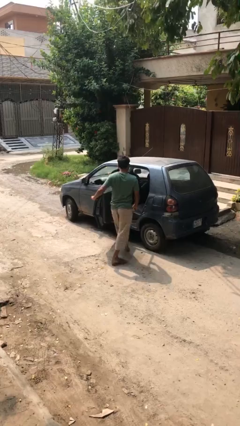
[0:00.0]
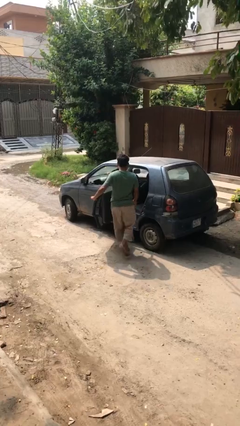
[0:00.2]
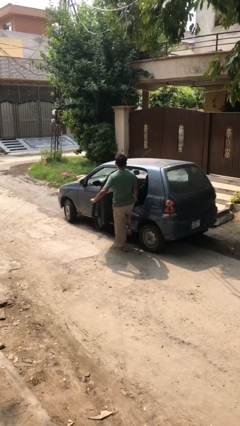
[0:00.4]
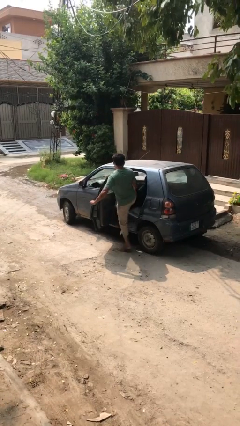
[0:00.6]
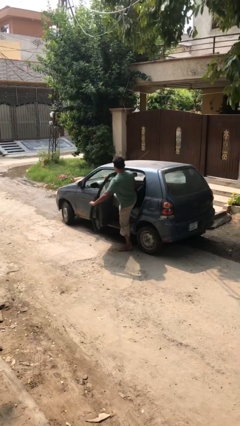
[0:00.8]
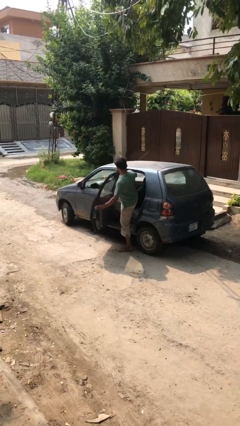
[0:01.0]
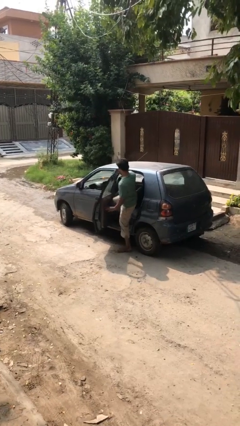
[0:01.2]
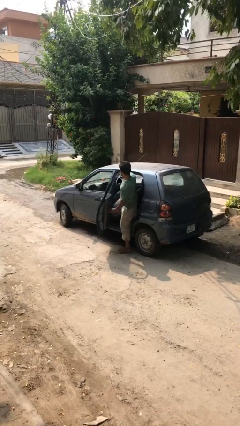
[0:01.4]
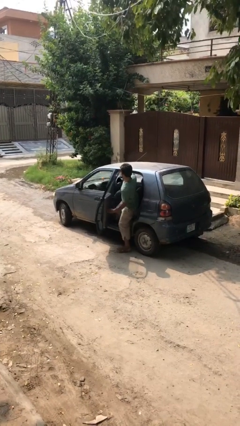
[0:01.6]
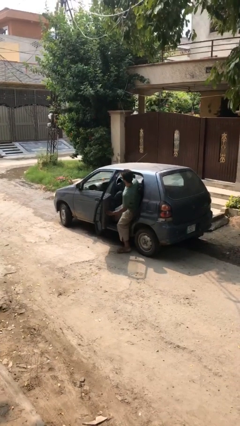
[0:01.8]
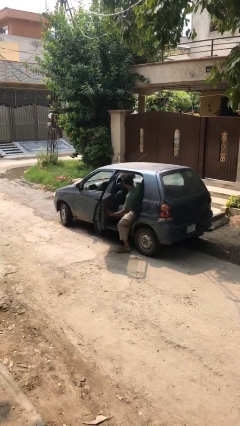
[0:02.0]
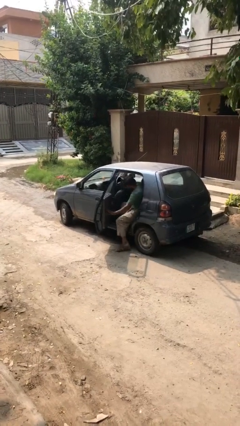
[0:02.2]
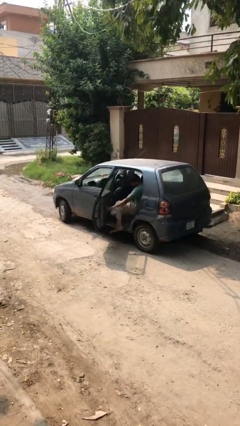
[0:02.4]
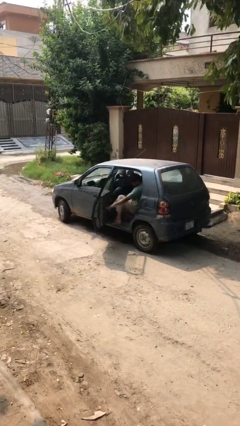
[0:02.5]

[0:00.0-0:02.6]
person enters car

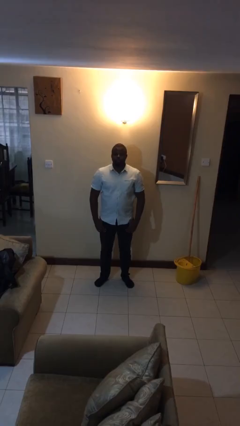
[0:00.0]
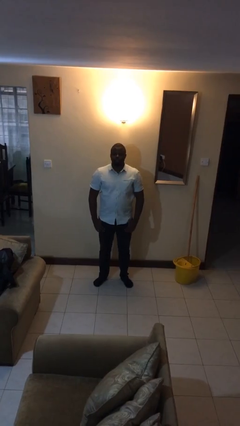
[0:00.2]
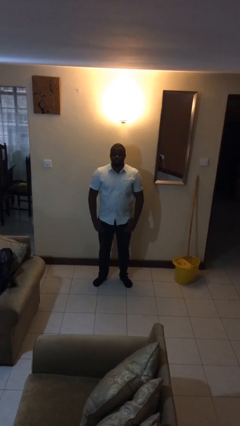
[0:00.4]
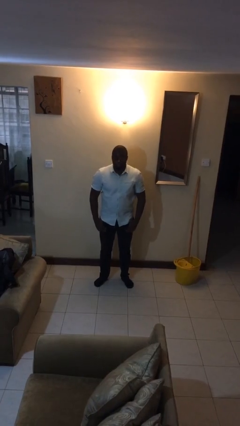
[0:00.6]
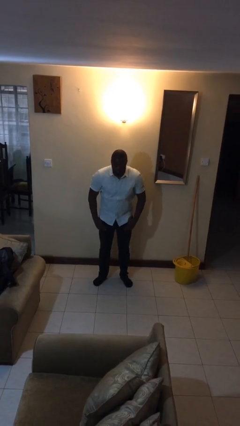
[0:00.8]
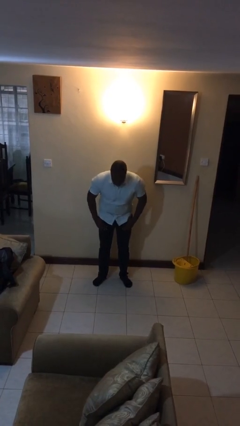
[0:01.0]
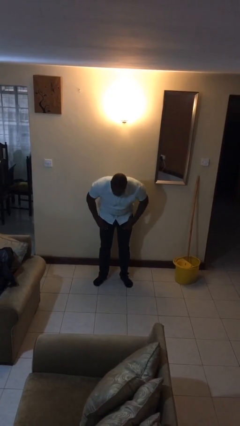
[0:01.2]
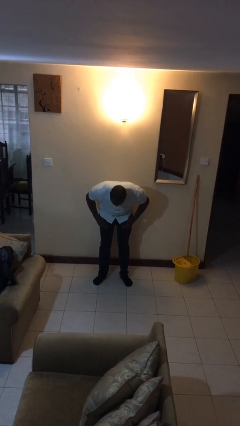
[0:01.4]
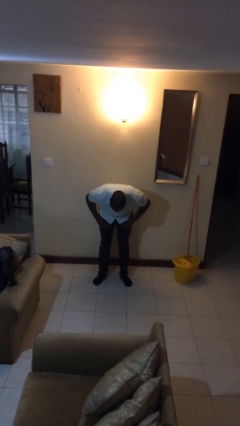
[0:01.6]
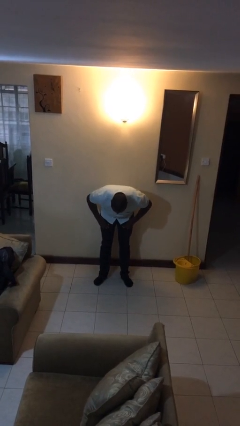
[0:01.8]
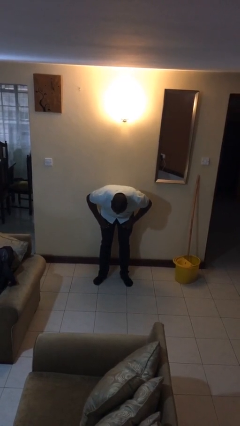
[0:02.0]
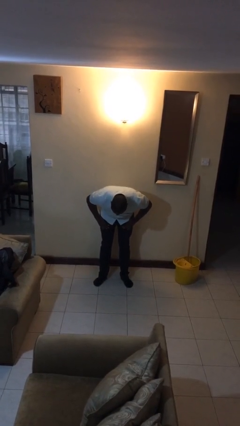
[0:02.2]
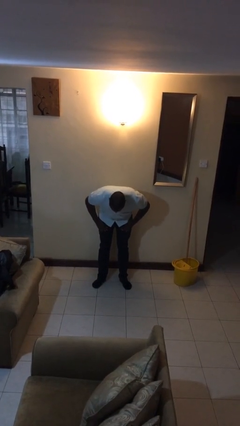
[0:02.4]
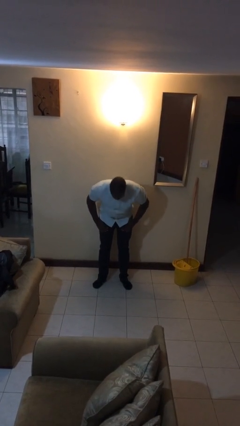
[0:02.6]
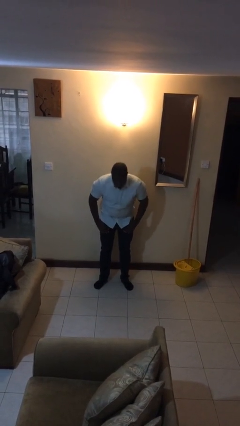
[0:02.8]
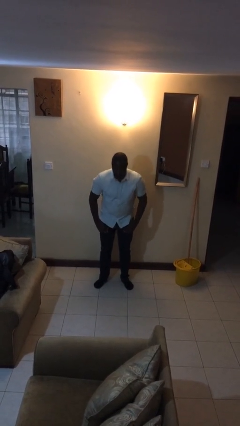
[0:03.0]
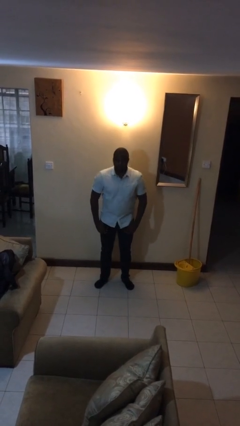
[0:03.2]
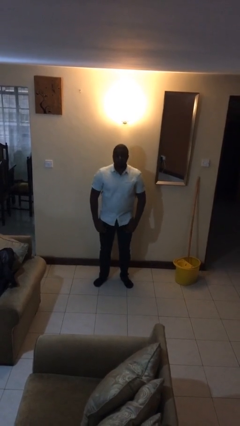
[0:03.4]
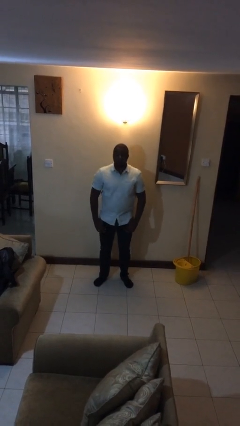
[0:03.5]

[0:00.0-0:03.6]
person bows

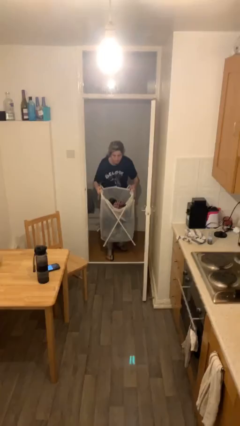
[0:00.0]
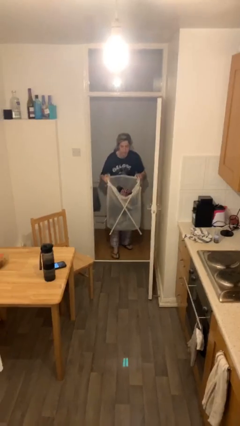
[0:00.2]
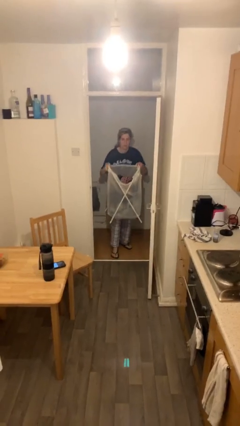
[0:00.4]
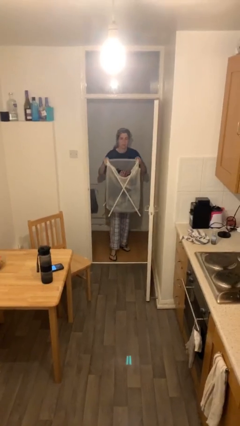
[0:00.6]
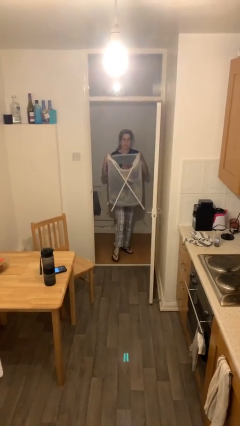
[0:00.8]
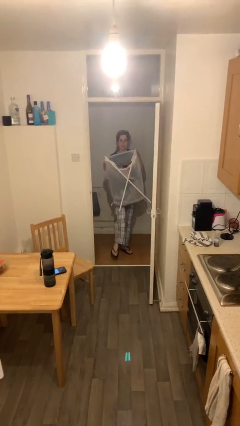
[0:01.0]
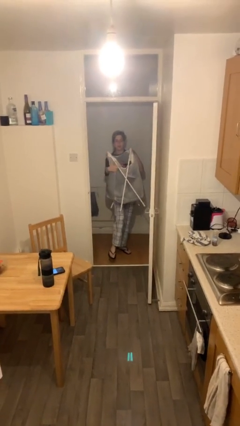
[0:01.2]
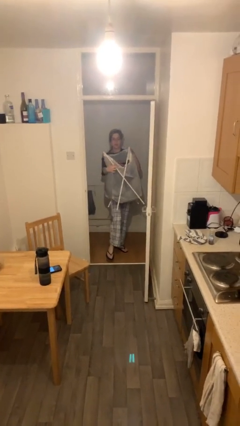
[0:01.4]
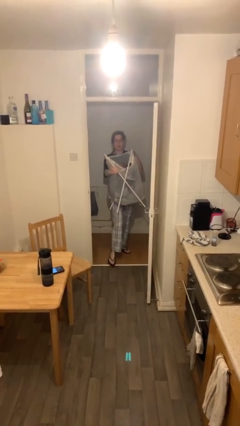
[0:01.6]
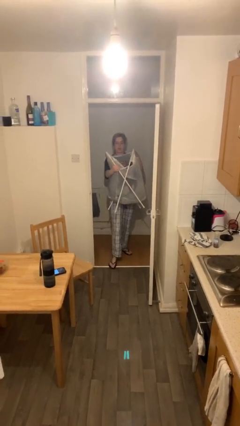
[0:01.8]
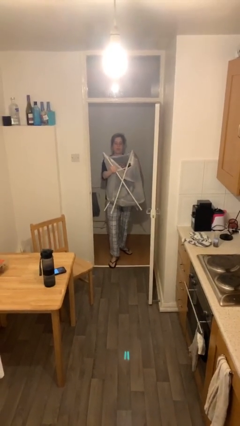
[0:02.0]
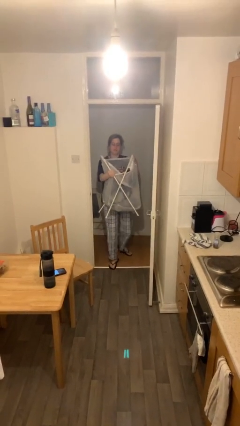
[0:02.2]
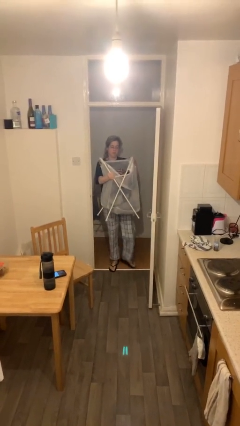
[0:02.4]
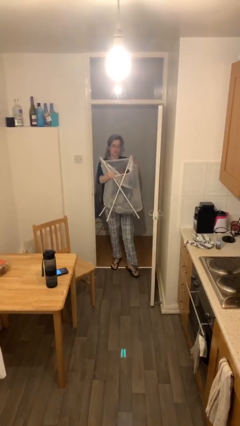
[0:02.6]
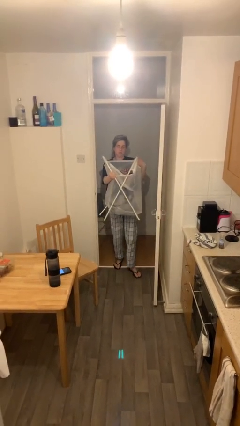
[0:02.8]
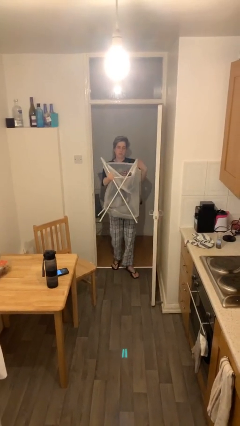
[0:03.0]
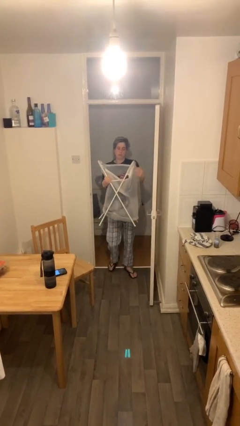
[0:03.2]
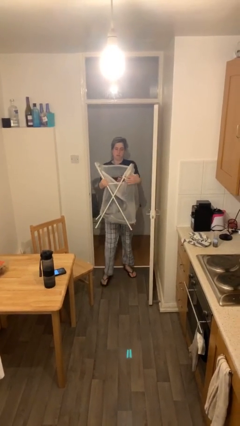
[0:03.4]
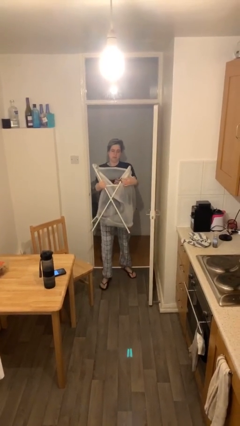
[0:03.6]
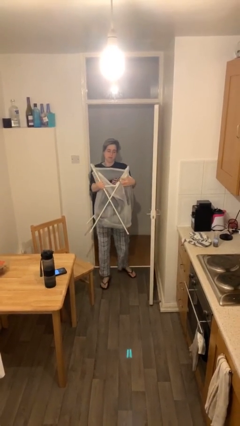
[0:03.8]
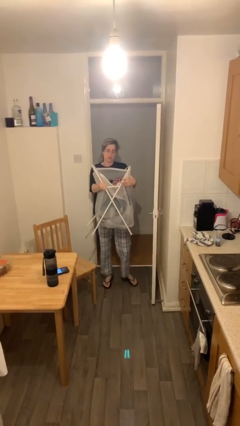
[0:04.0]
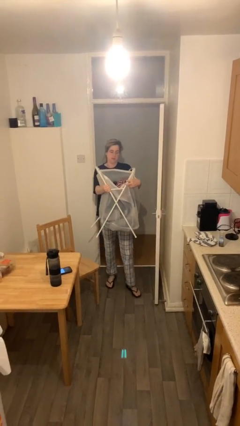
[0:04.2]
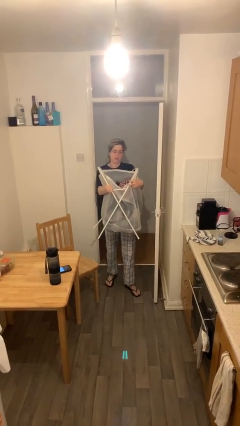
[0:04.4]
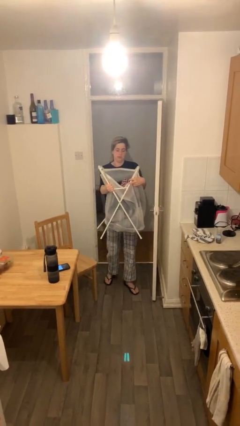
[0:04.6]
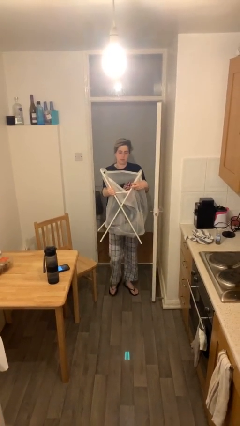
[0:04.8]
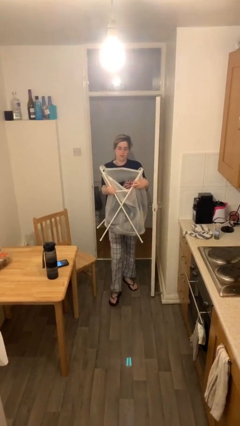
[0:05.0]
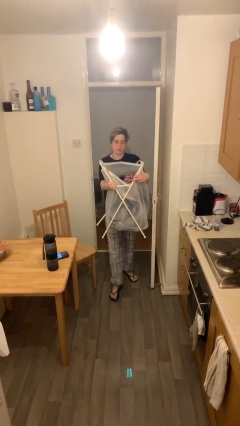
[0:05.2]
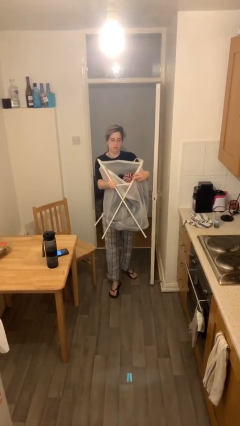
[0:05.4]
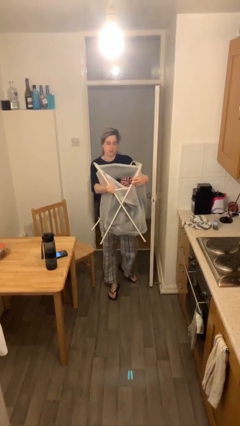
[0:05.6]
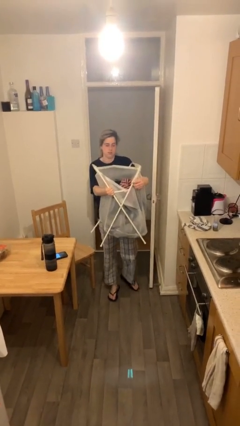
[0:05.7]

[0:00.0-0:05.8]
person carries heavy object

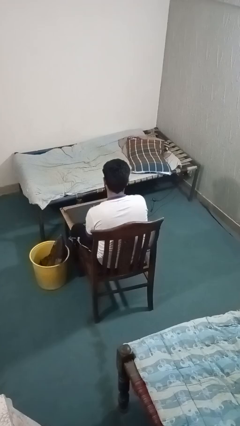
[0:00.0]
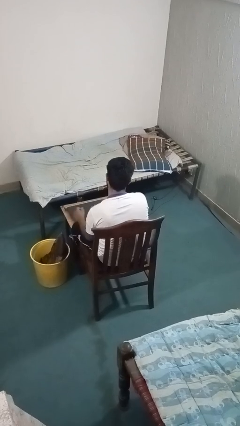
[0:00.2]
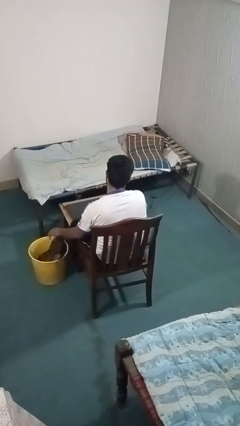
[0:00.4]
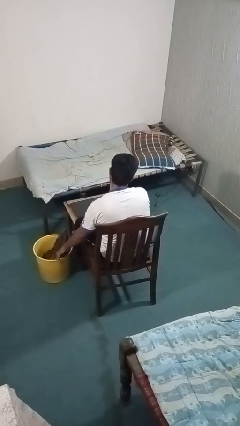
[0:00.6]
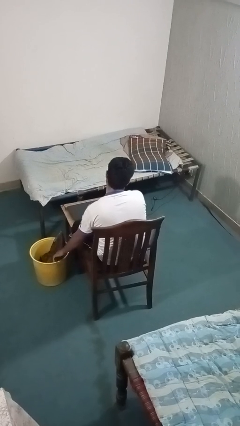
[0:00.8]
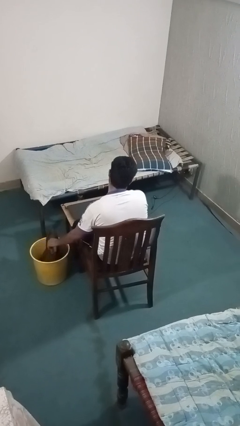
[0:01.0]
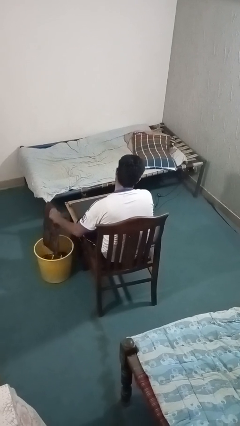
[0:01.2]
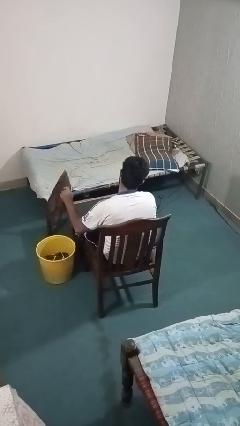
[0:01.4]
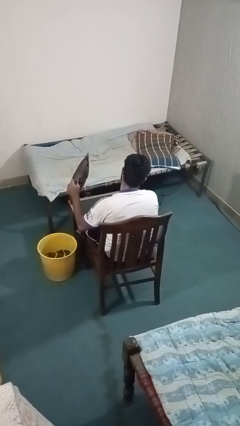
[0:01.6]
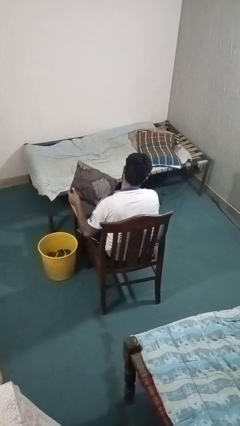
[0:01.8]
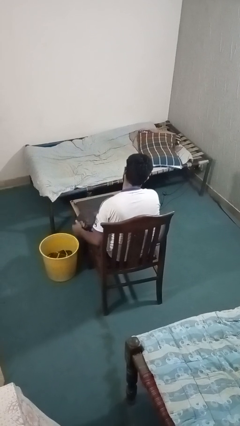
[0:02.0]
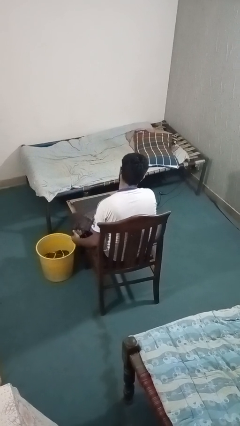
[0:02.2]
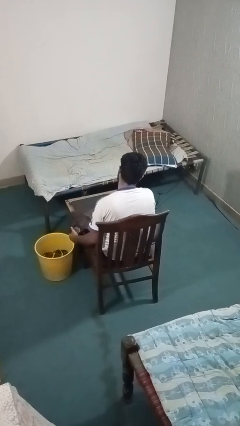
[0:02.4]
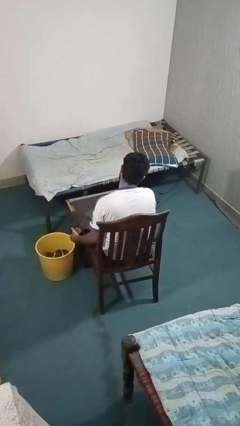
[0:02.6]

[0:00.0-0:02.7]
person takes object from basket

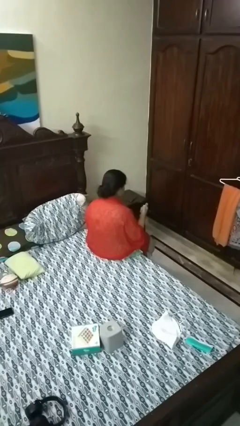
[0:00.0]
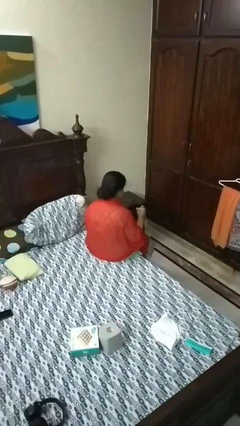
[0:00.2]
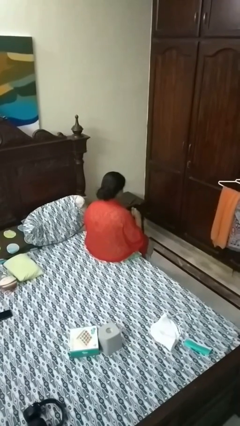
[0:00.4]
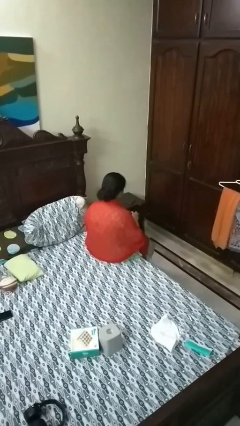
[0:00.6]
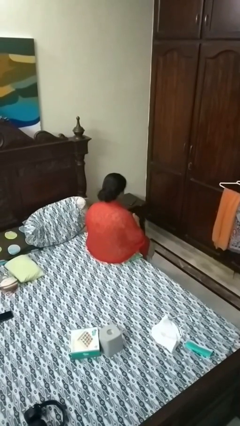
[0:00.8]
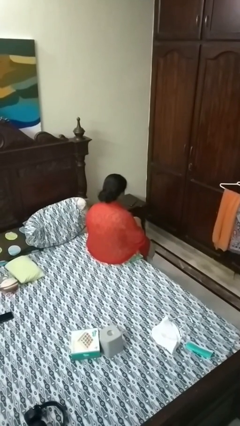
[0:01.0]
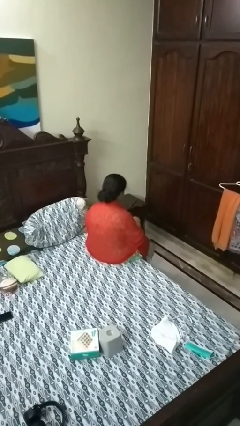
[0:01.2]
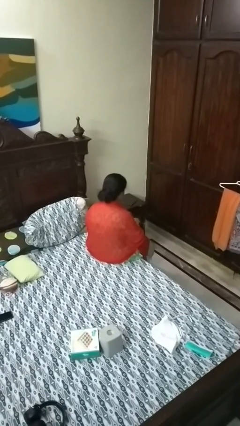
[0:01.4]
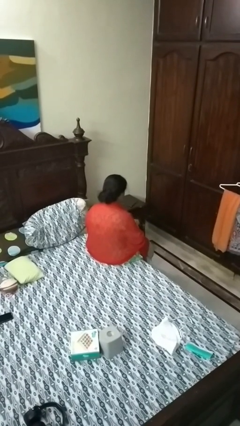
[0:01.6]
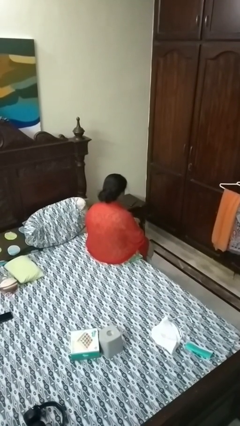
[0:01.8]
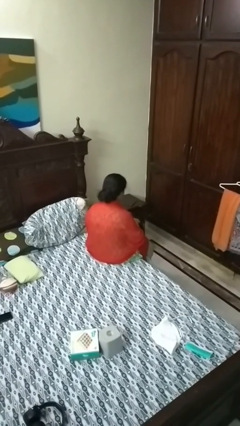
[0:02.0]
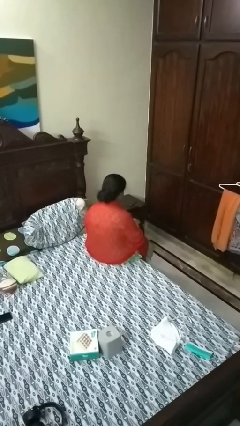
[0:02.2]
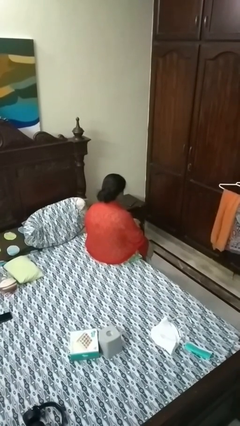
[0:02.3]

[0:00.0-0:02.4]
person puts object into purse

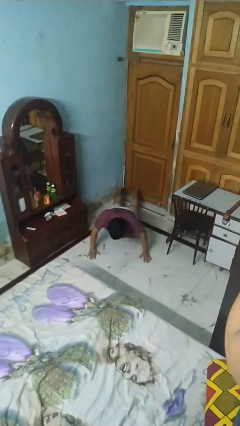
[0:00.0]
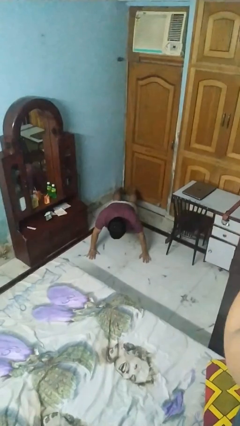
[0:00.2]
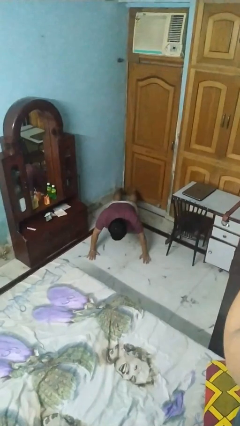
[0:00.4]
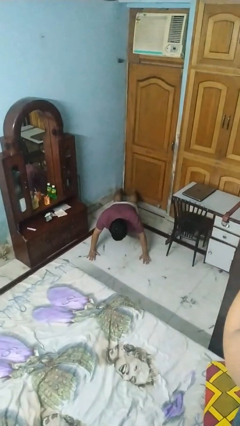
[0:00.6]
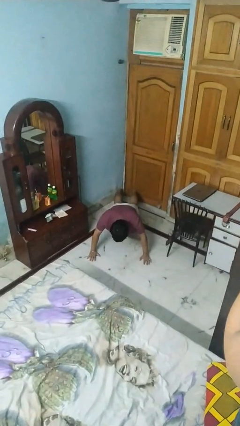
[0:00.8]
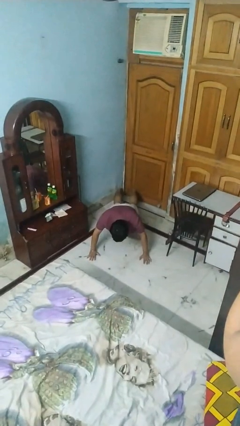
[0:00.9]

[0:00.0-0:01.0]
person exercises with pushup
